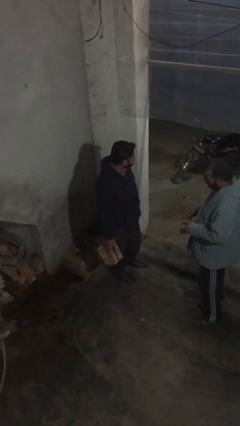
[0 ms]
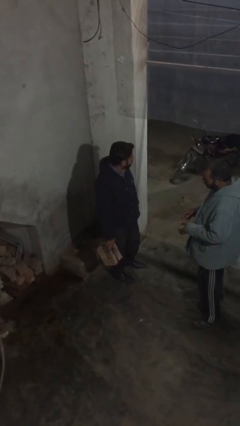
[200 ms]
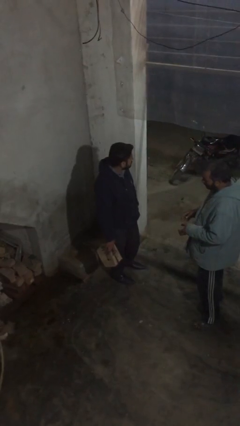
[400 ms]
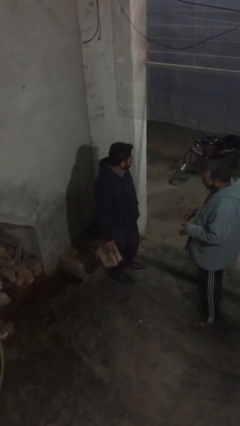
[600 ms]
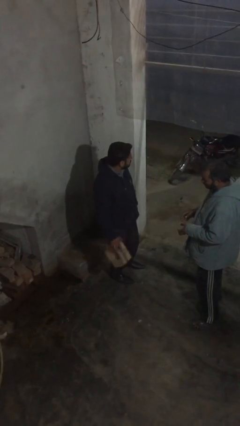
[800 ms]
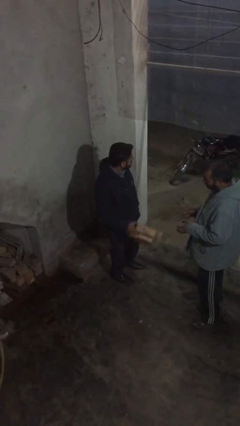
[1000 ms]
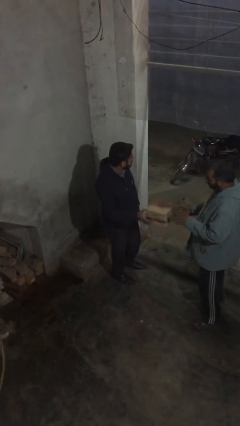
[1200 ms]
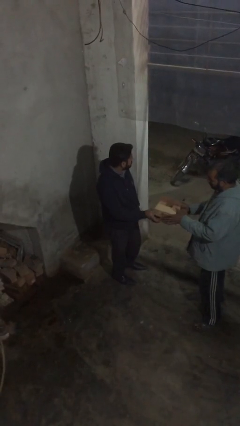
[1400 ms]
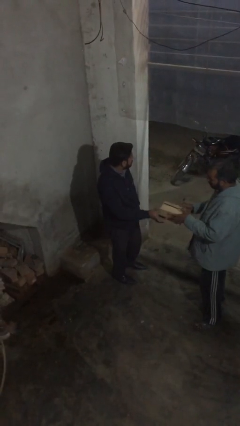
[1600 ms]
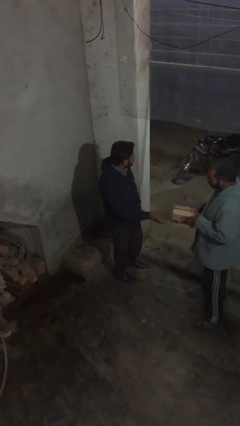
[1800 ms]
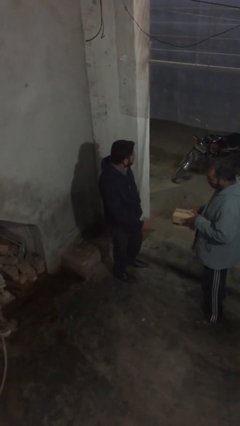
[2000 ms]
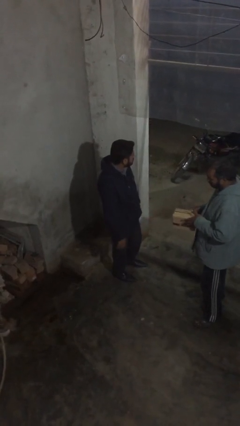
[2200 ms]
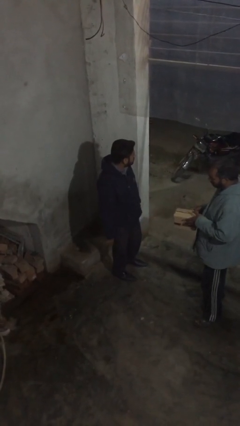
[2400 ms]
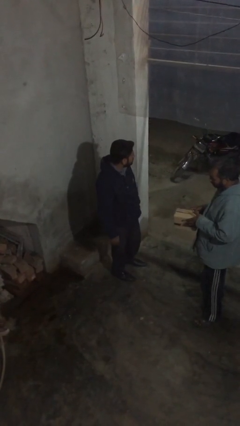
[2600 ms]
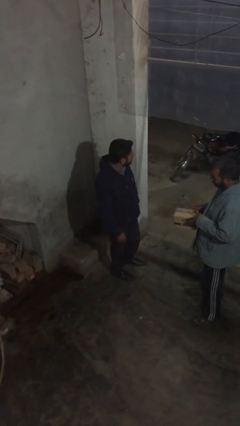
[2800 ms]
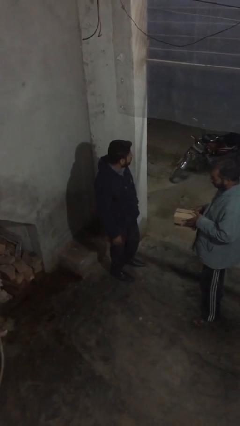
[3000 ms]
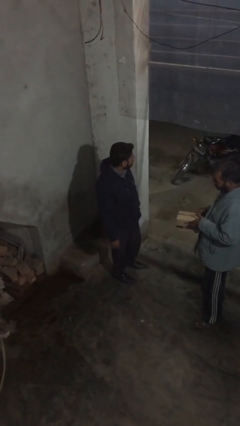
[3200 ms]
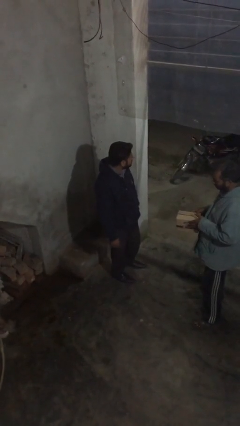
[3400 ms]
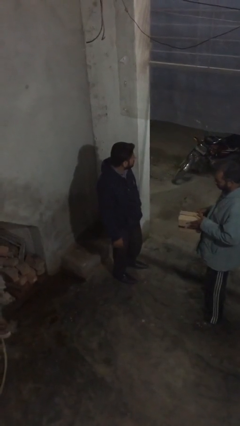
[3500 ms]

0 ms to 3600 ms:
person transfers object to person

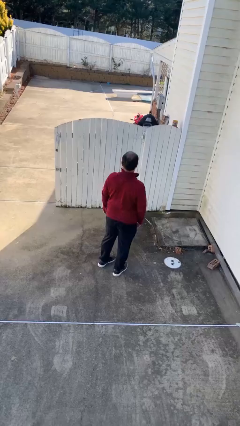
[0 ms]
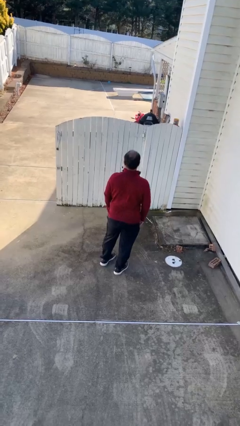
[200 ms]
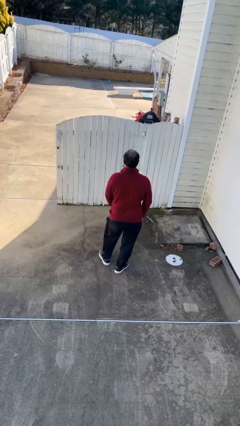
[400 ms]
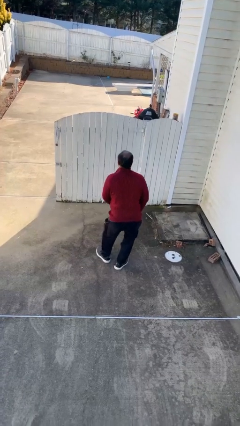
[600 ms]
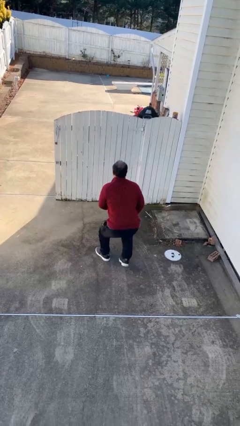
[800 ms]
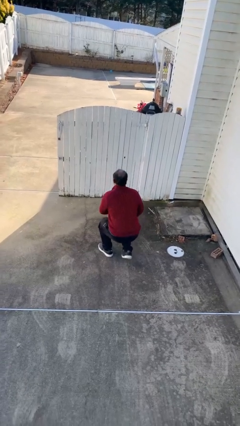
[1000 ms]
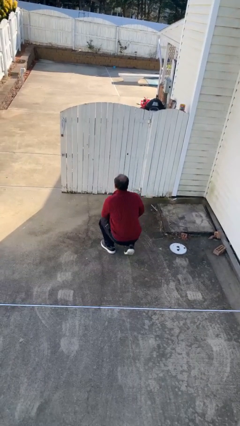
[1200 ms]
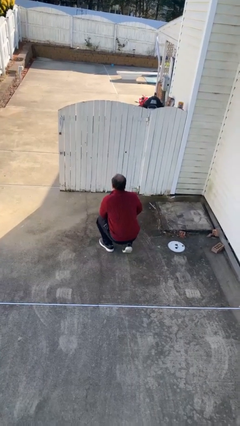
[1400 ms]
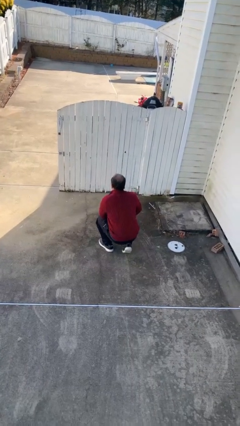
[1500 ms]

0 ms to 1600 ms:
person sits down

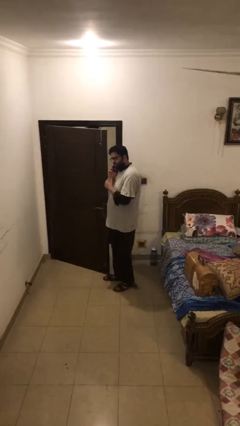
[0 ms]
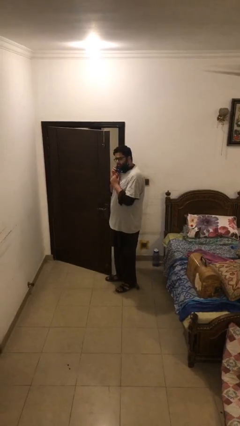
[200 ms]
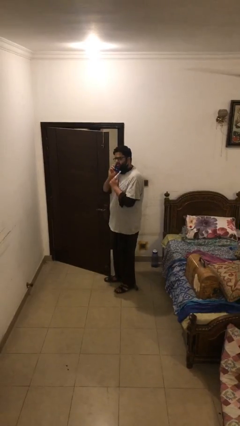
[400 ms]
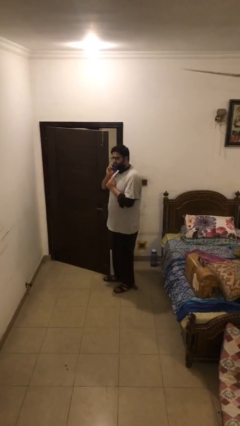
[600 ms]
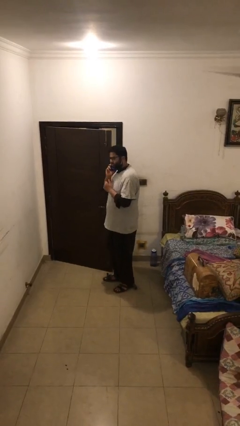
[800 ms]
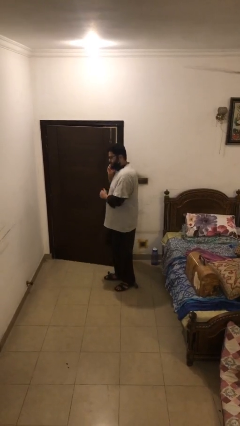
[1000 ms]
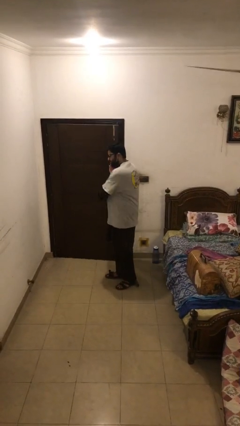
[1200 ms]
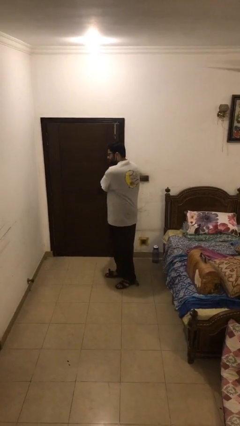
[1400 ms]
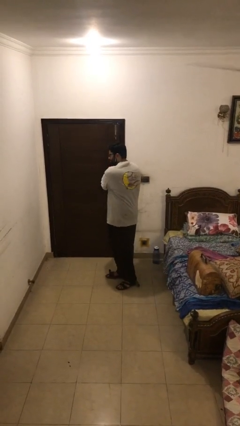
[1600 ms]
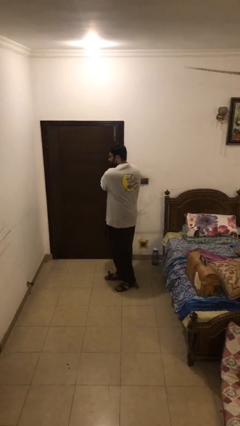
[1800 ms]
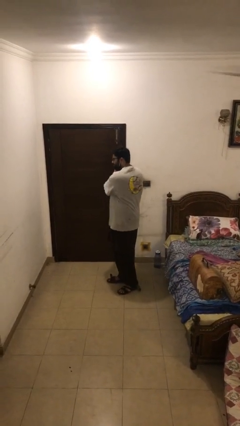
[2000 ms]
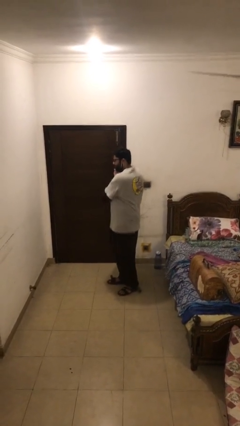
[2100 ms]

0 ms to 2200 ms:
person closes facility door

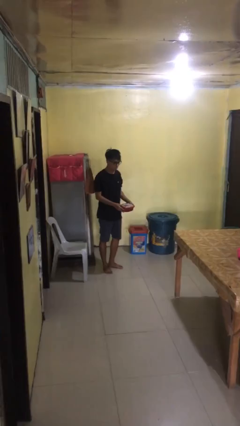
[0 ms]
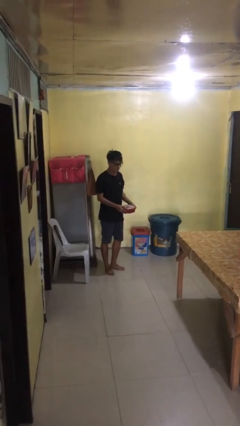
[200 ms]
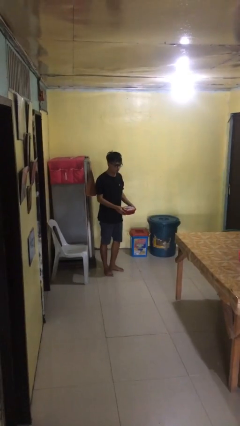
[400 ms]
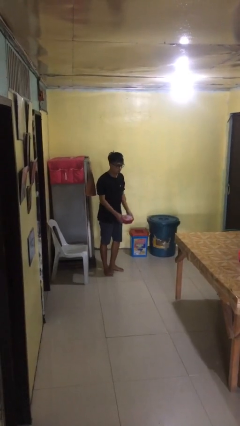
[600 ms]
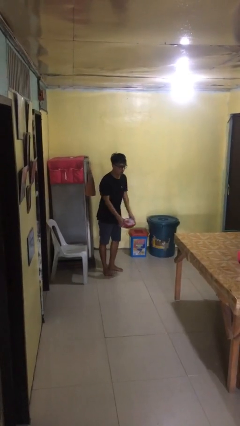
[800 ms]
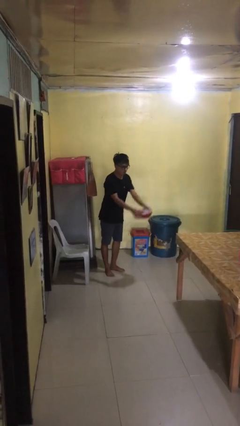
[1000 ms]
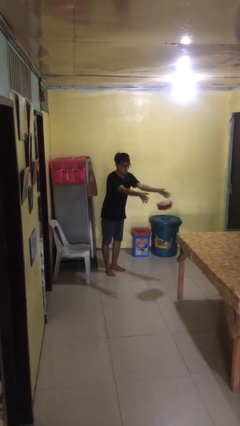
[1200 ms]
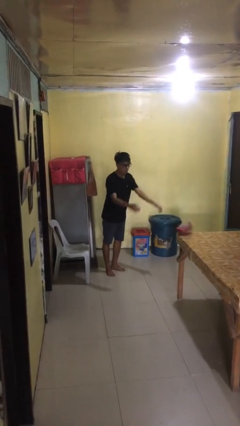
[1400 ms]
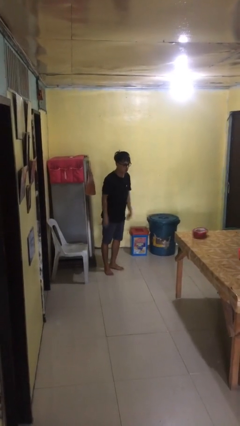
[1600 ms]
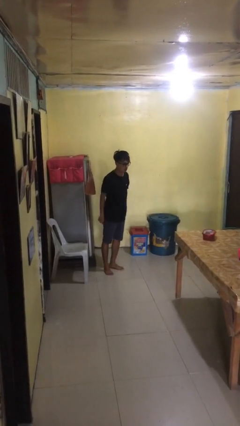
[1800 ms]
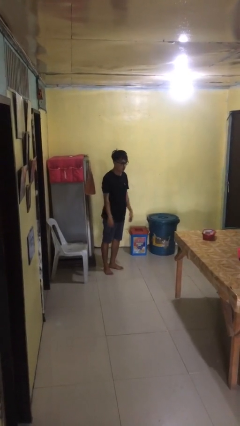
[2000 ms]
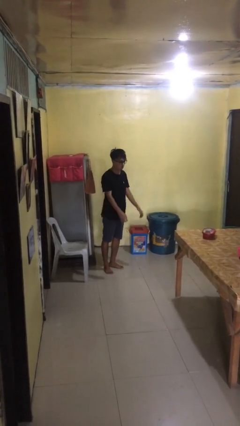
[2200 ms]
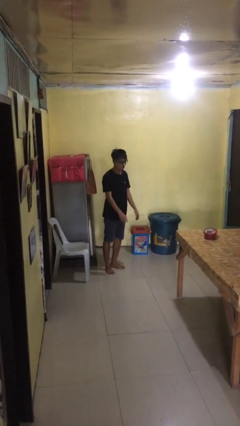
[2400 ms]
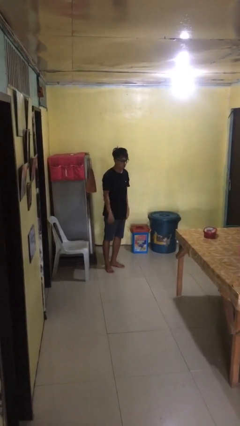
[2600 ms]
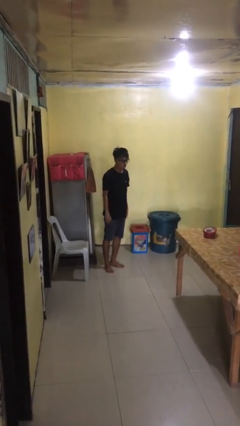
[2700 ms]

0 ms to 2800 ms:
person throws object on table

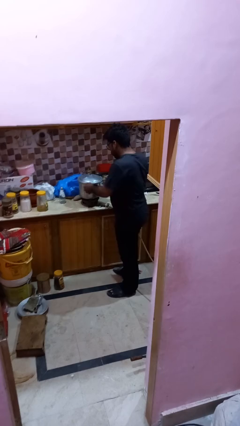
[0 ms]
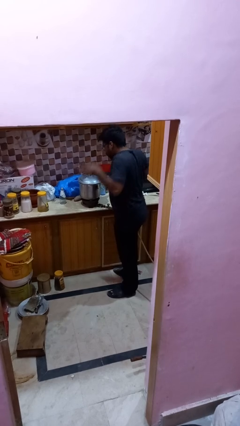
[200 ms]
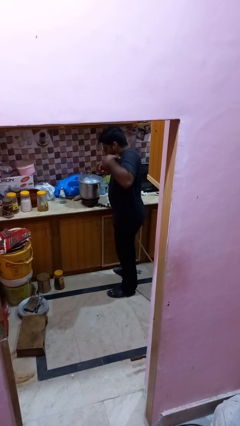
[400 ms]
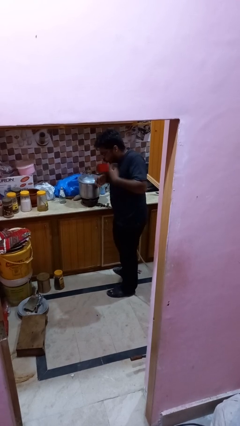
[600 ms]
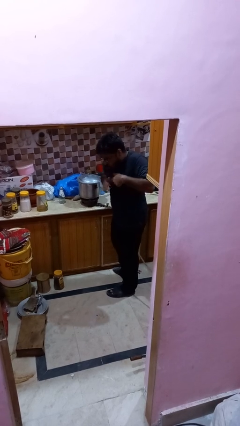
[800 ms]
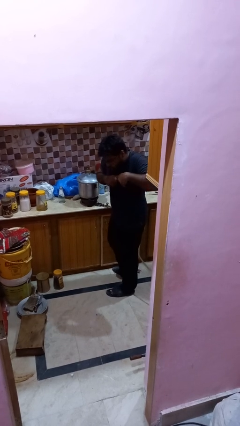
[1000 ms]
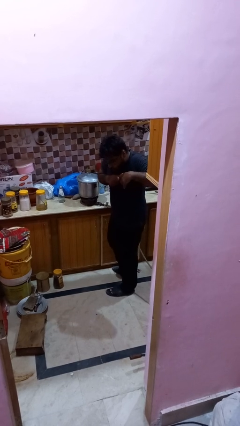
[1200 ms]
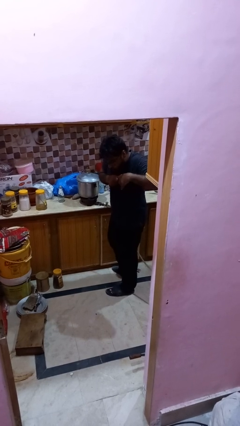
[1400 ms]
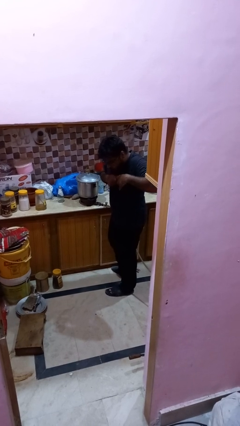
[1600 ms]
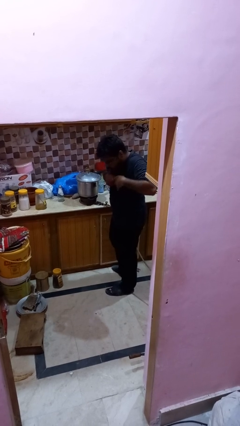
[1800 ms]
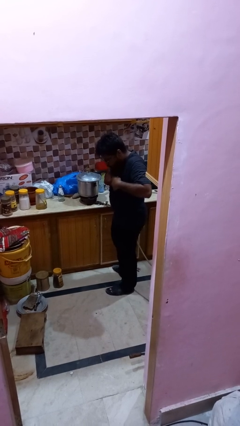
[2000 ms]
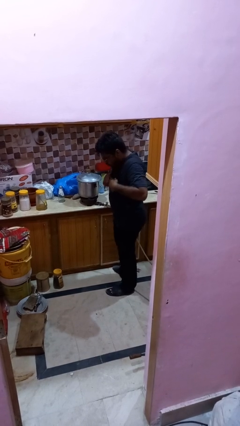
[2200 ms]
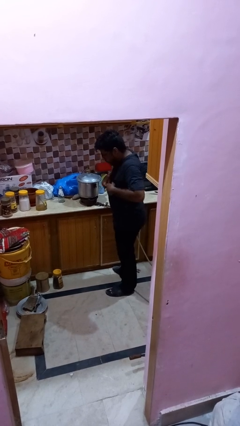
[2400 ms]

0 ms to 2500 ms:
person burns hand

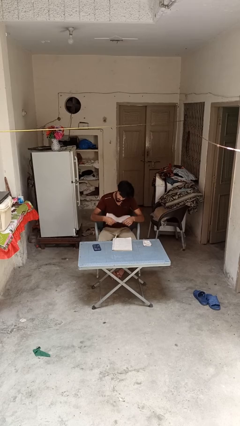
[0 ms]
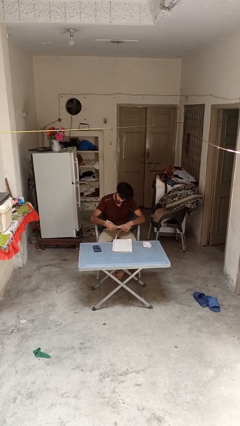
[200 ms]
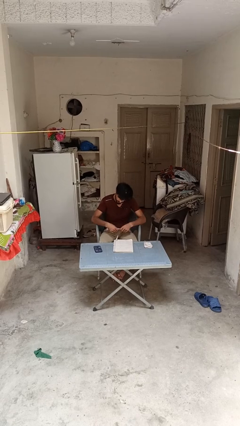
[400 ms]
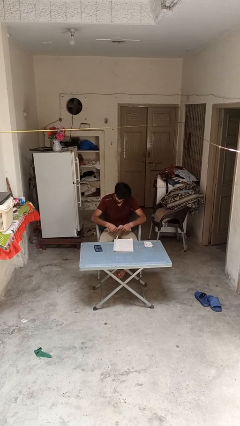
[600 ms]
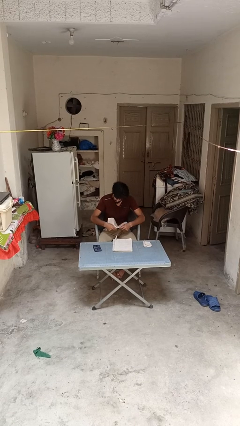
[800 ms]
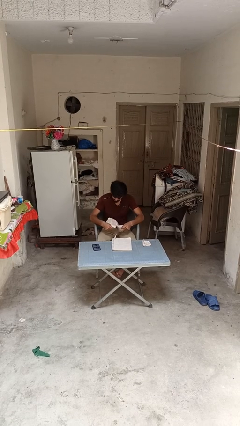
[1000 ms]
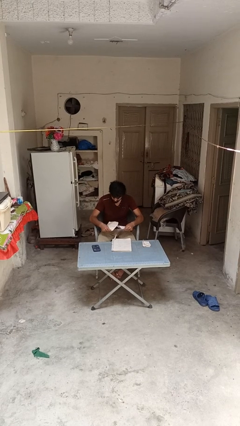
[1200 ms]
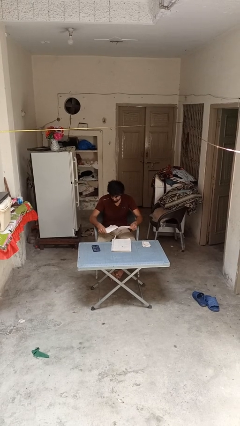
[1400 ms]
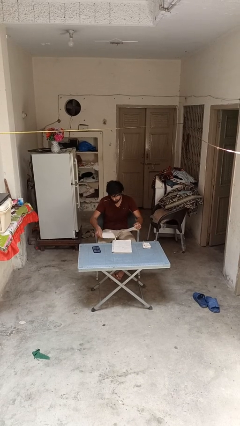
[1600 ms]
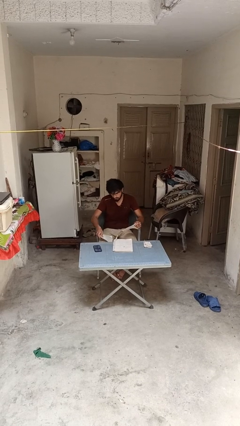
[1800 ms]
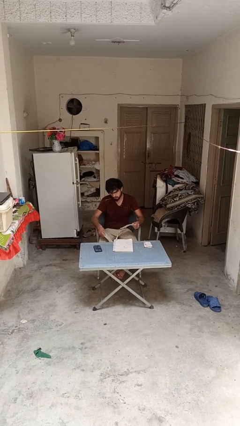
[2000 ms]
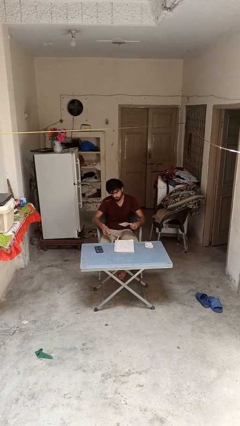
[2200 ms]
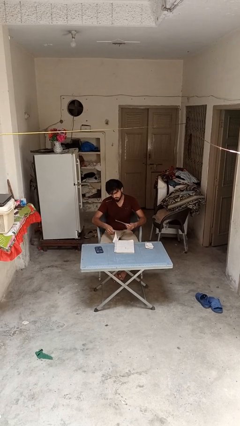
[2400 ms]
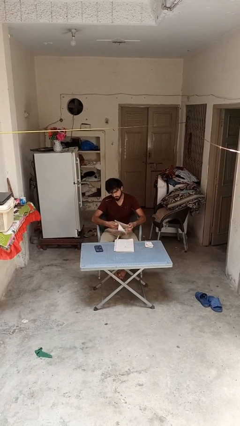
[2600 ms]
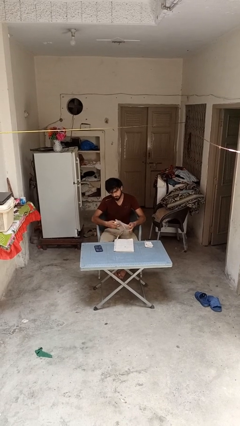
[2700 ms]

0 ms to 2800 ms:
person tears paper

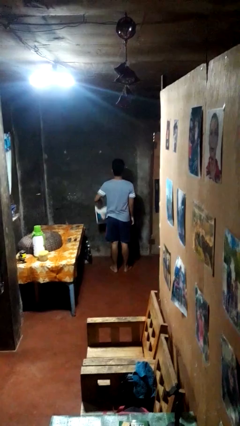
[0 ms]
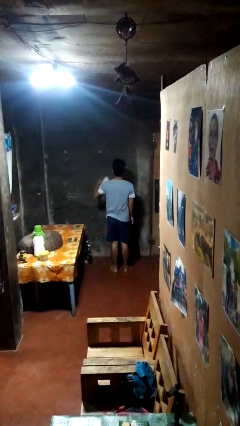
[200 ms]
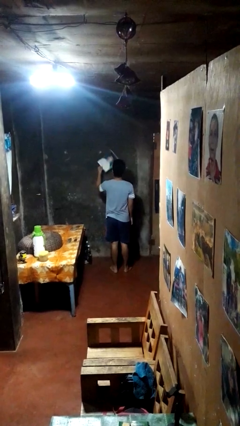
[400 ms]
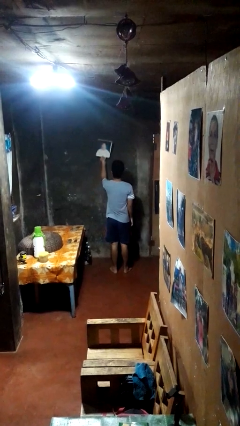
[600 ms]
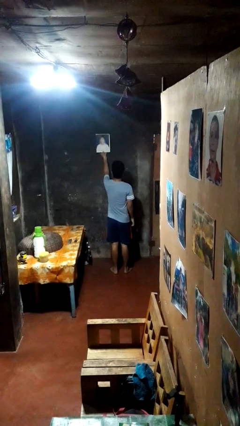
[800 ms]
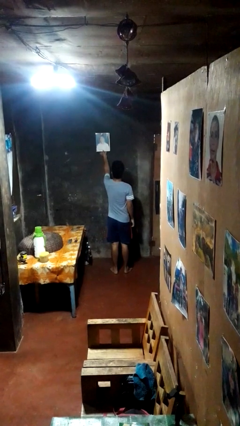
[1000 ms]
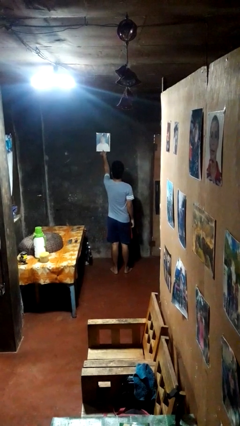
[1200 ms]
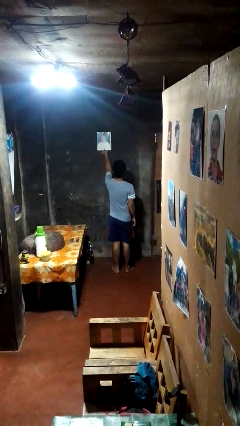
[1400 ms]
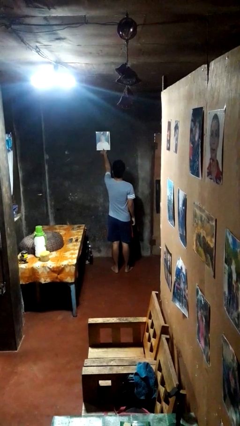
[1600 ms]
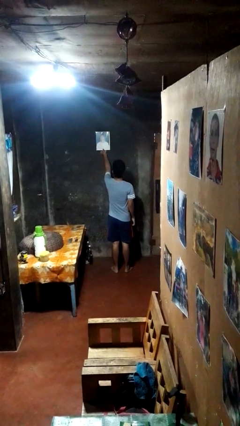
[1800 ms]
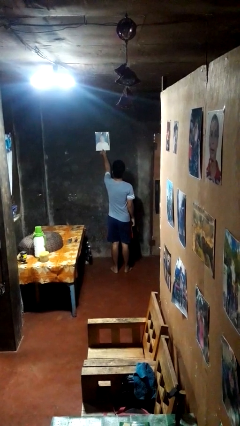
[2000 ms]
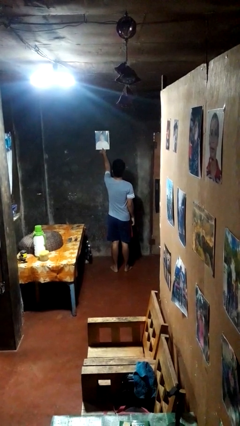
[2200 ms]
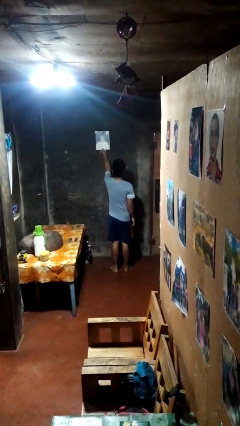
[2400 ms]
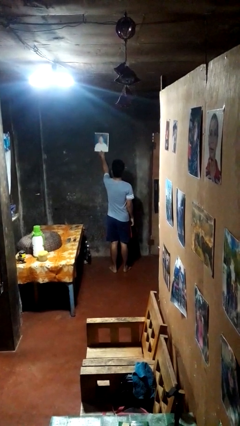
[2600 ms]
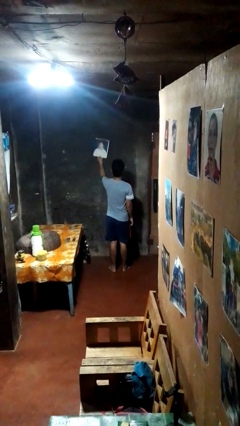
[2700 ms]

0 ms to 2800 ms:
person puts up picture frame
